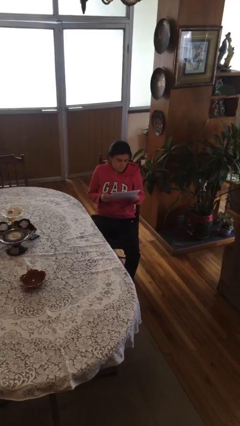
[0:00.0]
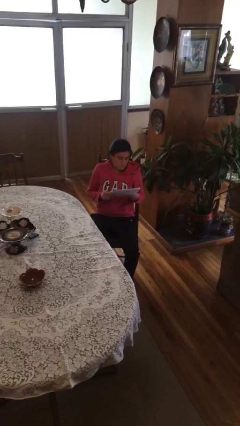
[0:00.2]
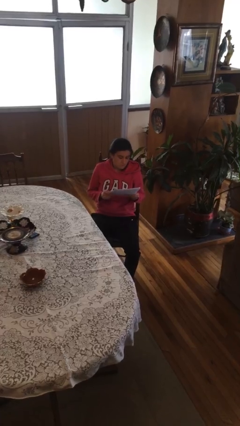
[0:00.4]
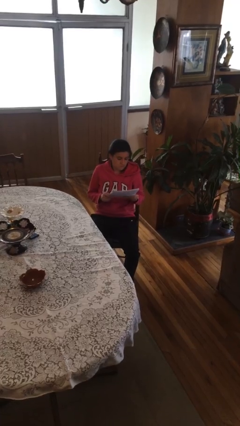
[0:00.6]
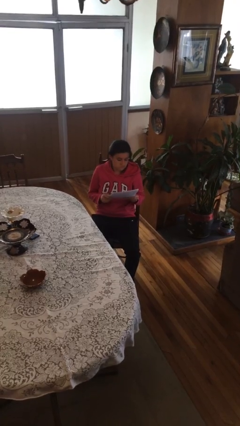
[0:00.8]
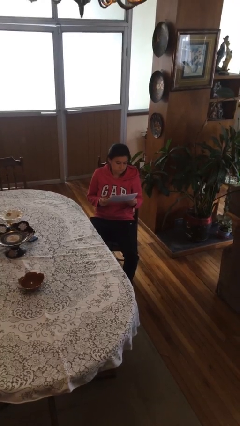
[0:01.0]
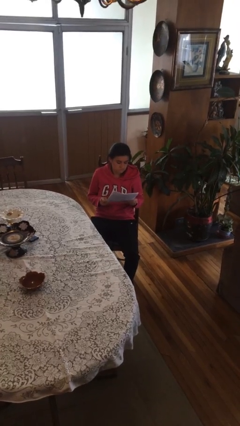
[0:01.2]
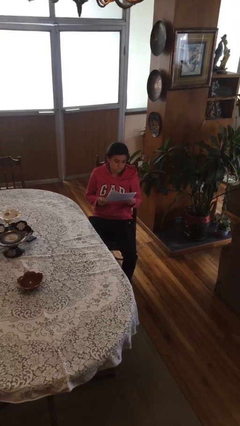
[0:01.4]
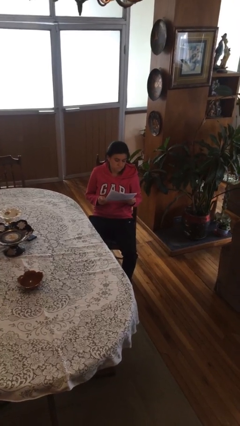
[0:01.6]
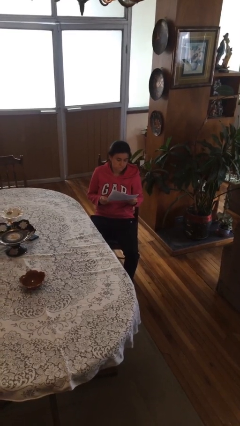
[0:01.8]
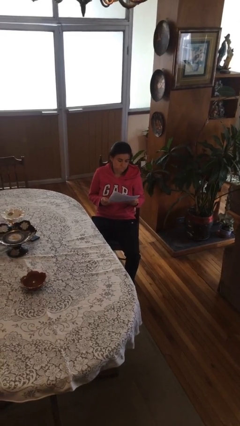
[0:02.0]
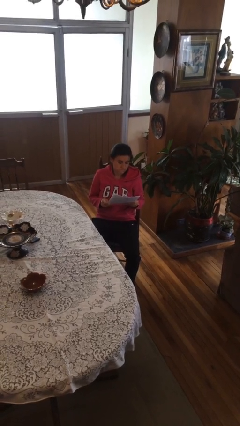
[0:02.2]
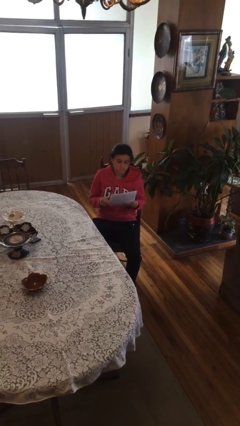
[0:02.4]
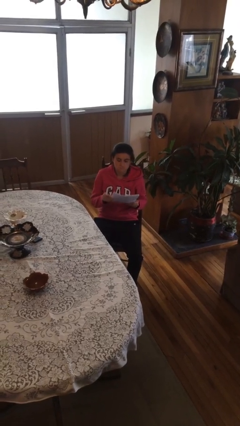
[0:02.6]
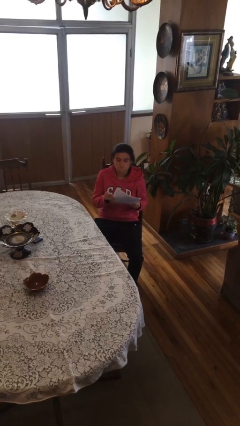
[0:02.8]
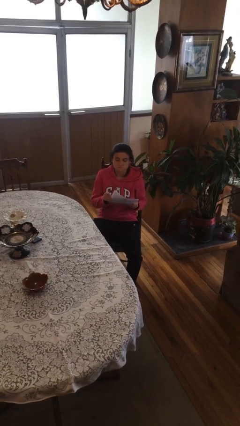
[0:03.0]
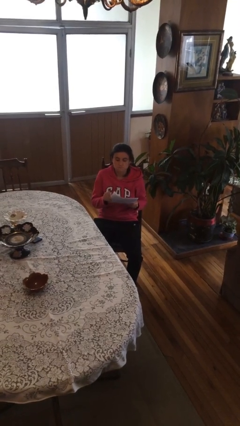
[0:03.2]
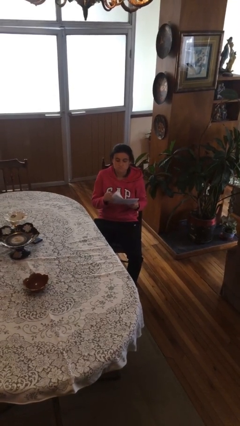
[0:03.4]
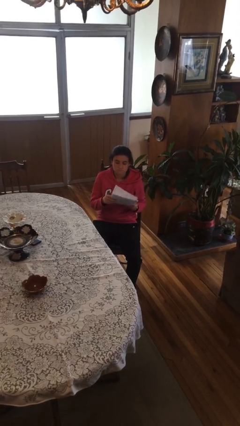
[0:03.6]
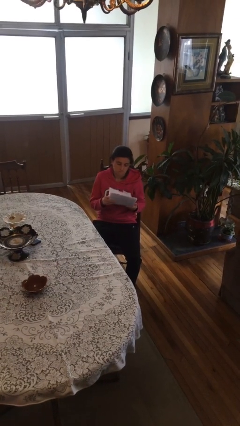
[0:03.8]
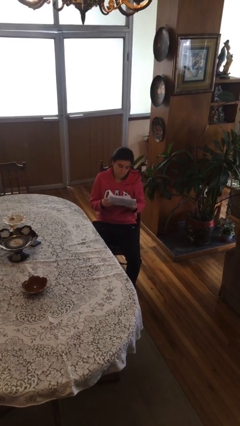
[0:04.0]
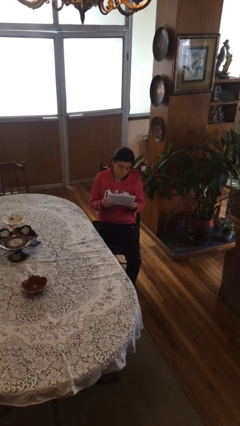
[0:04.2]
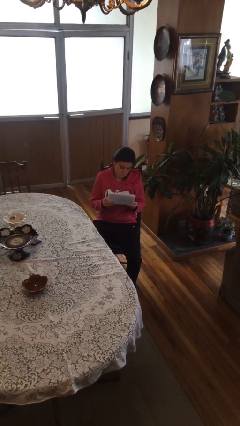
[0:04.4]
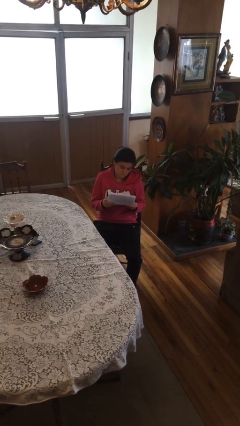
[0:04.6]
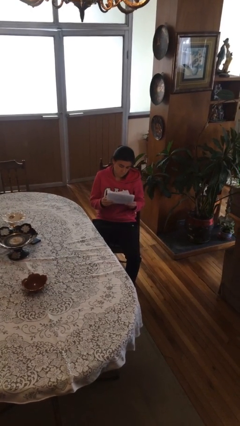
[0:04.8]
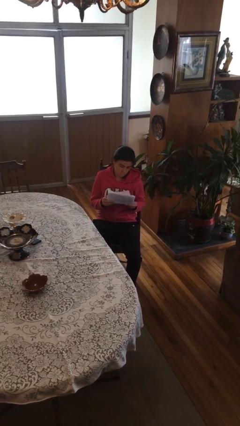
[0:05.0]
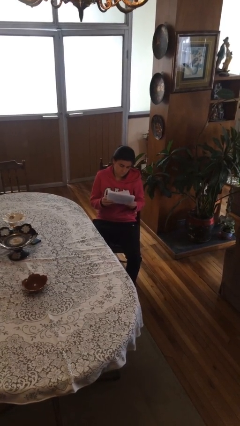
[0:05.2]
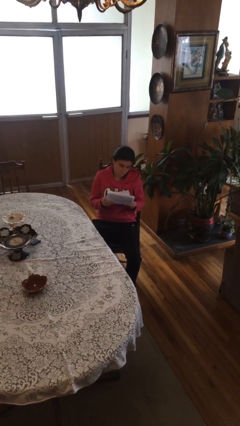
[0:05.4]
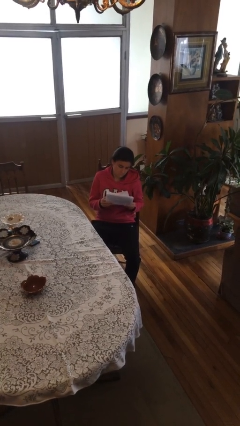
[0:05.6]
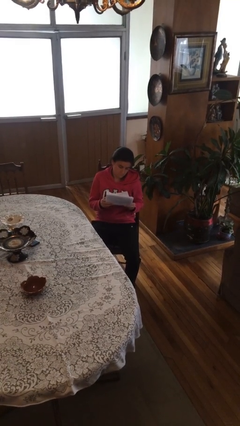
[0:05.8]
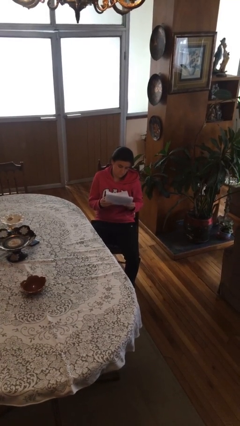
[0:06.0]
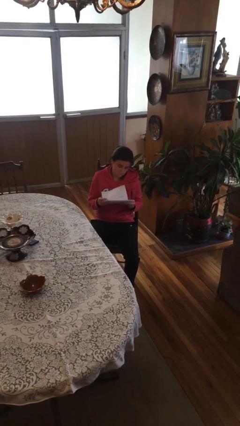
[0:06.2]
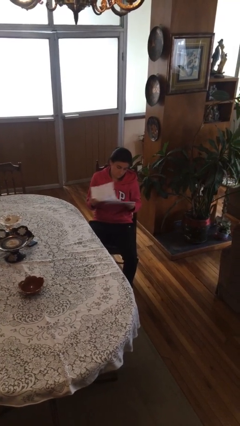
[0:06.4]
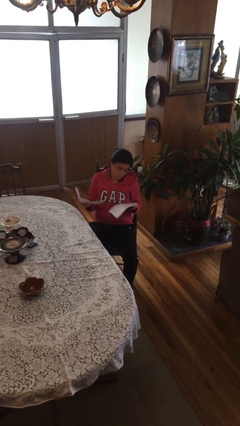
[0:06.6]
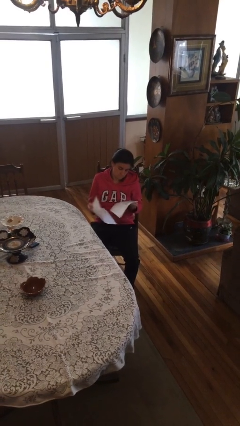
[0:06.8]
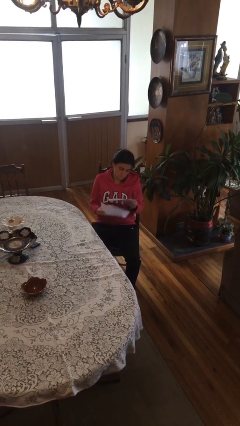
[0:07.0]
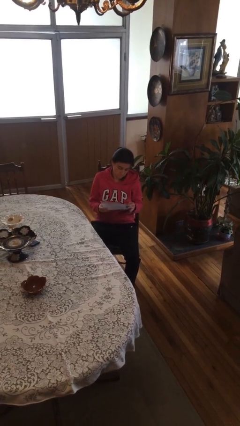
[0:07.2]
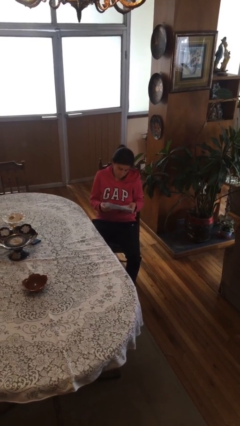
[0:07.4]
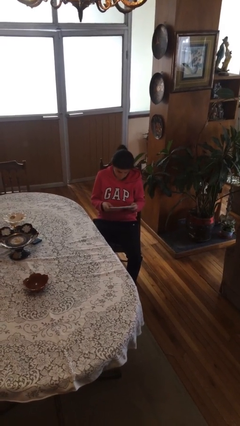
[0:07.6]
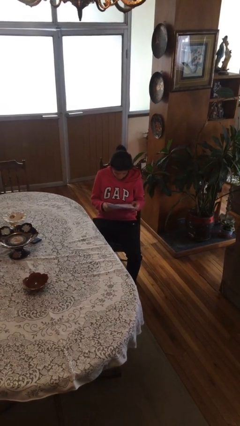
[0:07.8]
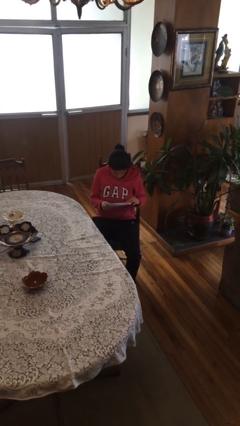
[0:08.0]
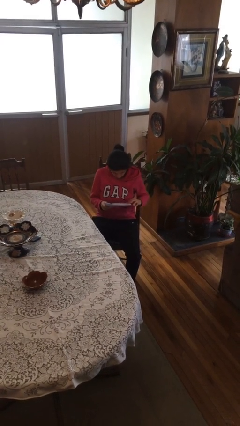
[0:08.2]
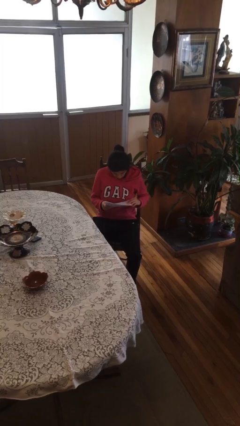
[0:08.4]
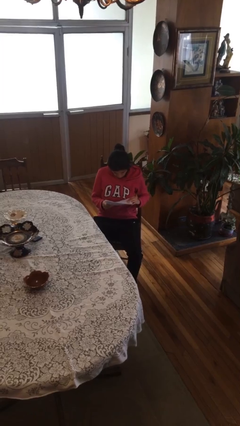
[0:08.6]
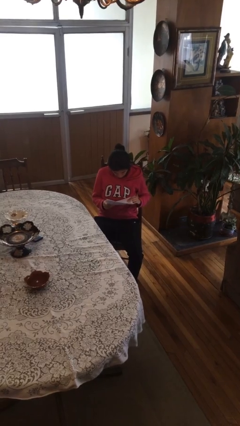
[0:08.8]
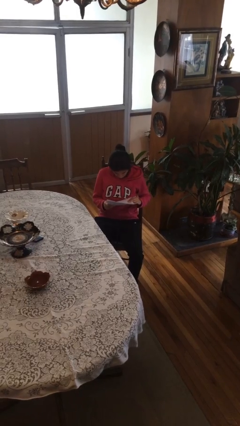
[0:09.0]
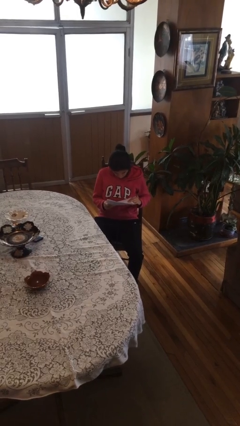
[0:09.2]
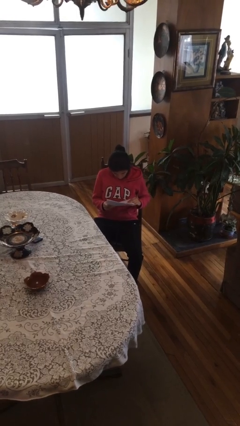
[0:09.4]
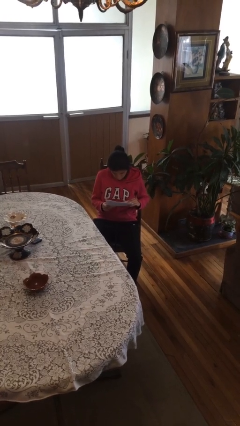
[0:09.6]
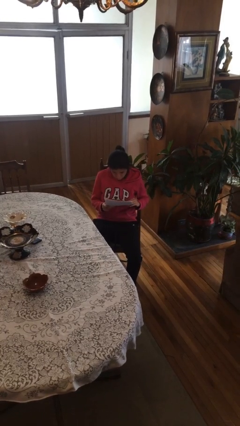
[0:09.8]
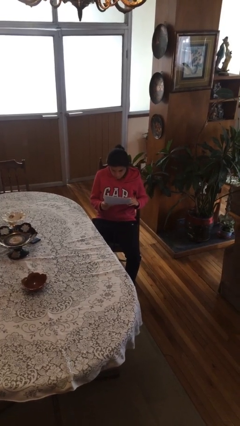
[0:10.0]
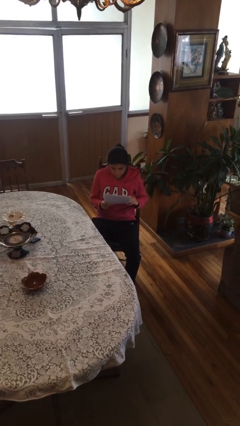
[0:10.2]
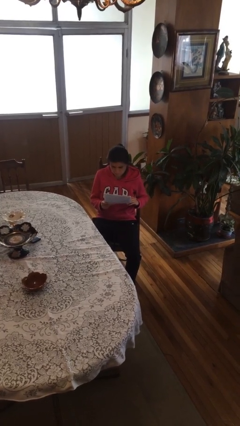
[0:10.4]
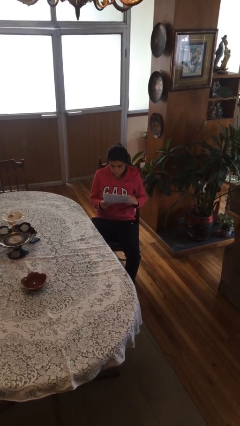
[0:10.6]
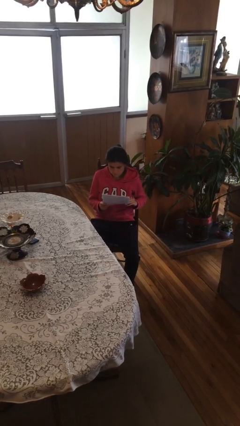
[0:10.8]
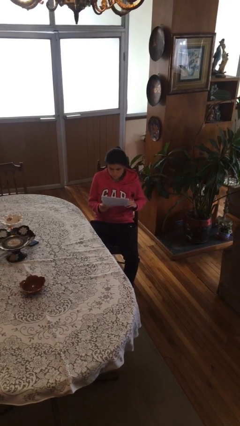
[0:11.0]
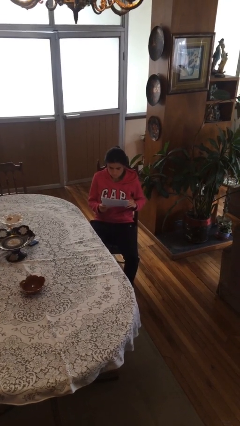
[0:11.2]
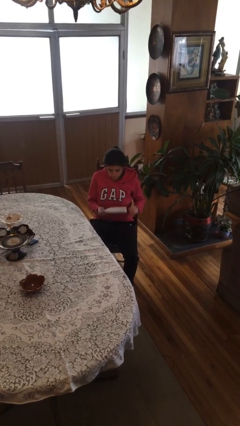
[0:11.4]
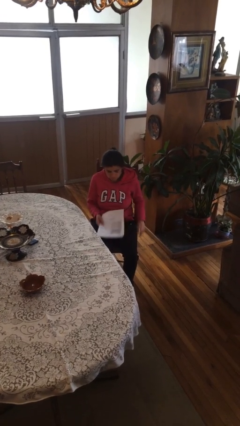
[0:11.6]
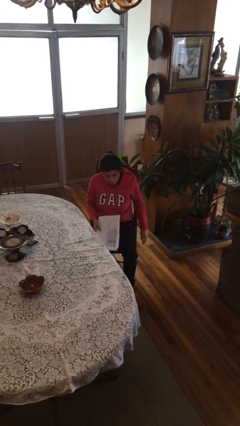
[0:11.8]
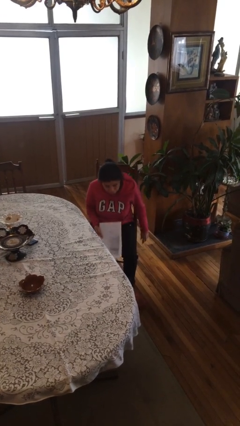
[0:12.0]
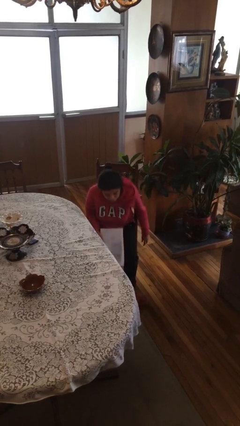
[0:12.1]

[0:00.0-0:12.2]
person reads document

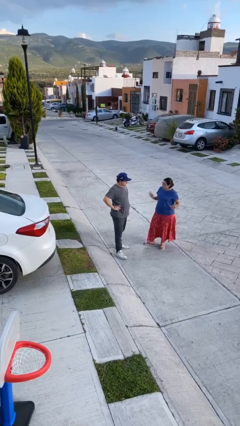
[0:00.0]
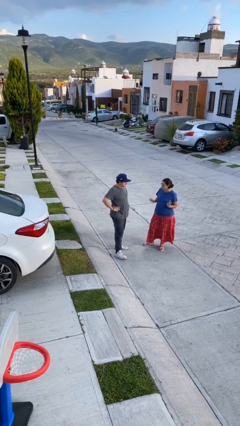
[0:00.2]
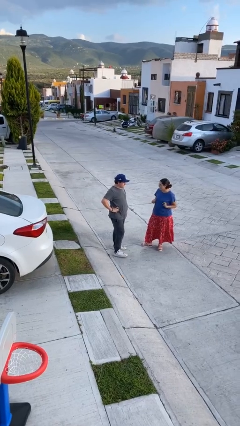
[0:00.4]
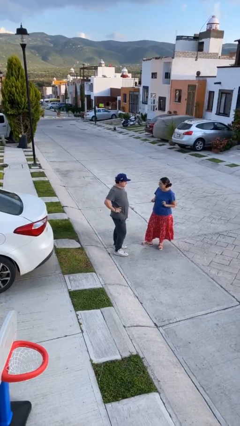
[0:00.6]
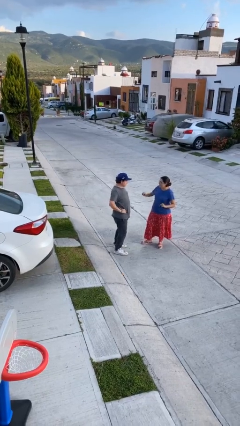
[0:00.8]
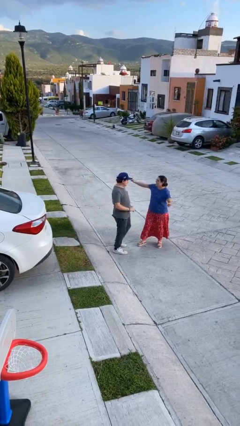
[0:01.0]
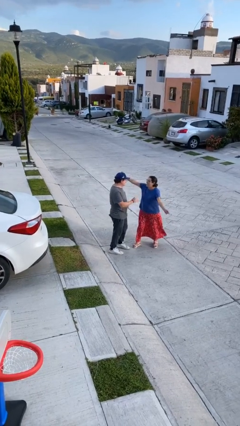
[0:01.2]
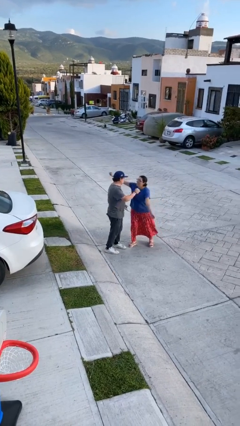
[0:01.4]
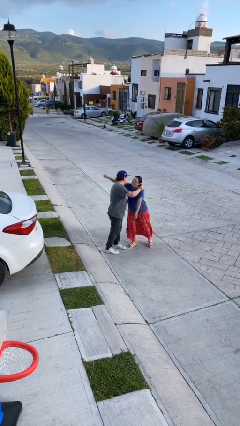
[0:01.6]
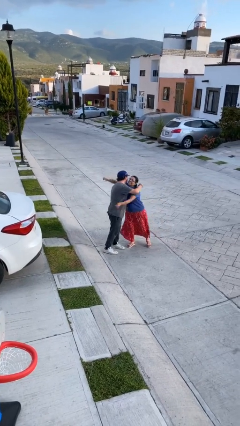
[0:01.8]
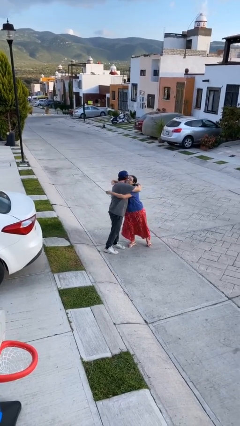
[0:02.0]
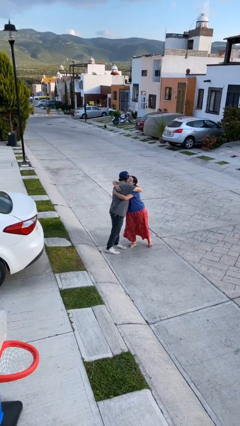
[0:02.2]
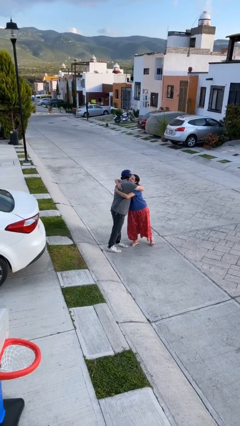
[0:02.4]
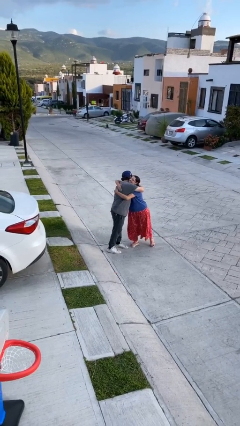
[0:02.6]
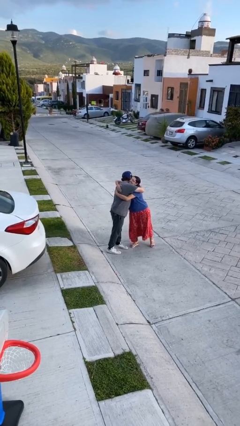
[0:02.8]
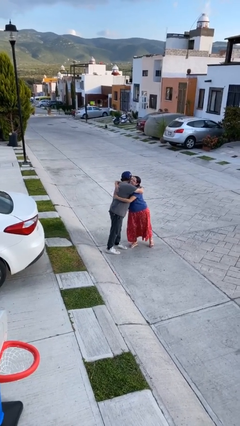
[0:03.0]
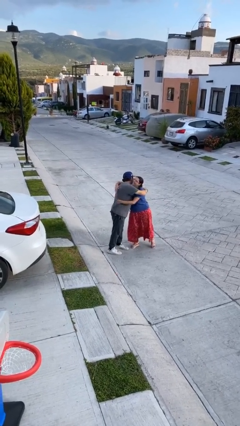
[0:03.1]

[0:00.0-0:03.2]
person embraces person

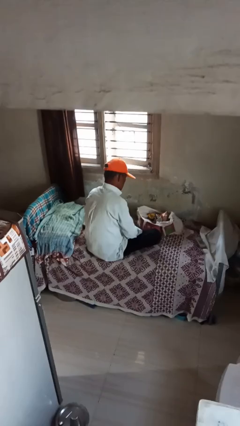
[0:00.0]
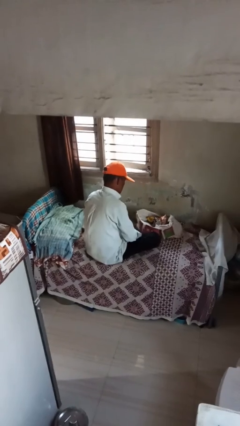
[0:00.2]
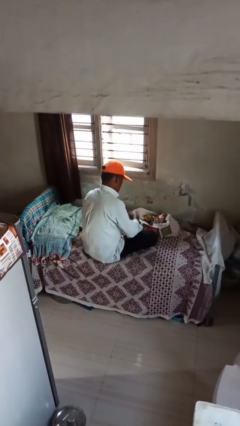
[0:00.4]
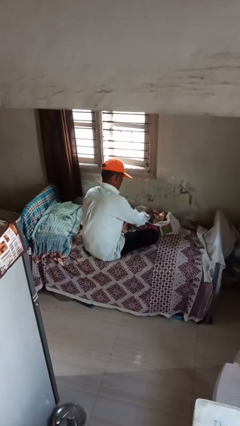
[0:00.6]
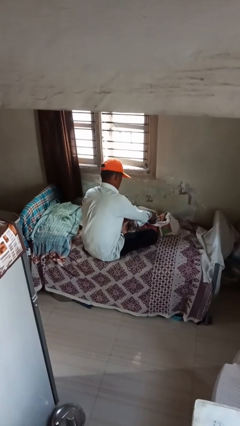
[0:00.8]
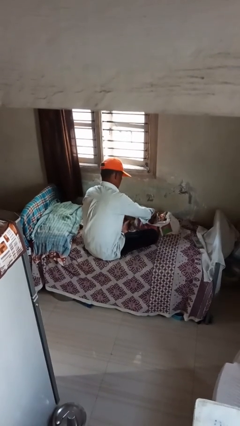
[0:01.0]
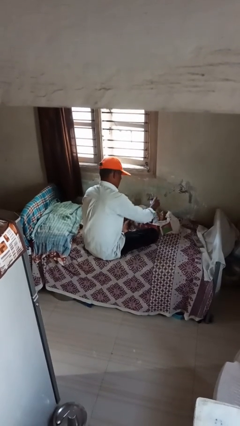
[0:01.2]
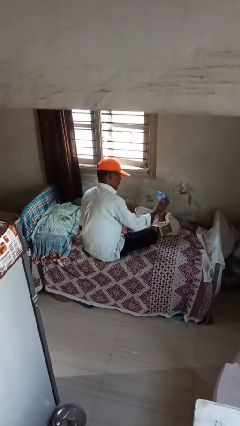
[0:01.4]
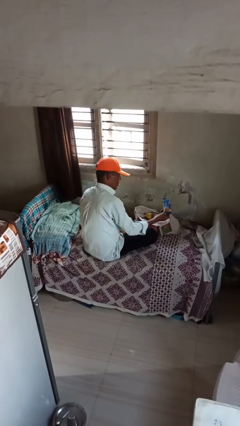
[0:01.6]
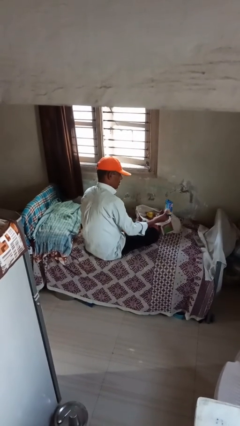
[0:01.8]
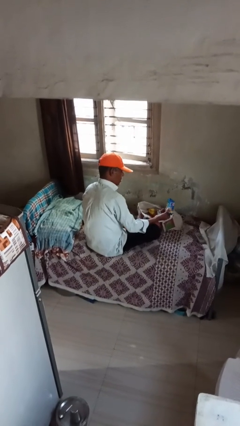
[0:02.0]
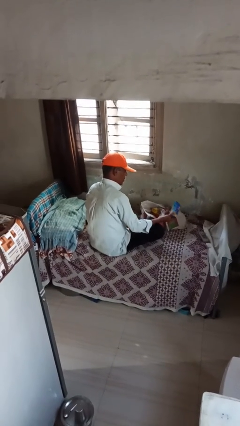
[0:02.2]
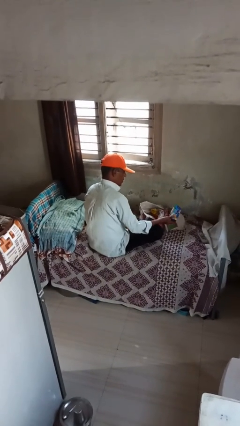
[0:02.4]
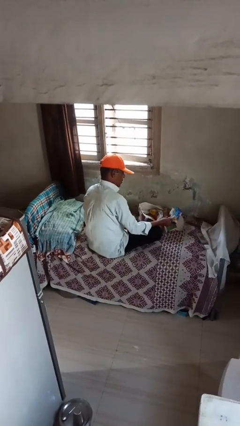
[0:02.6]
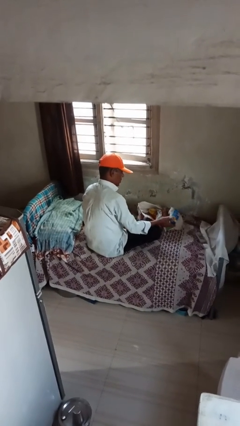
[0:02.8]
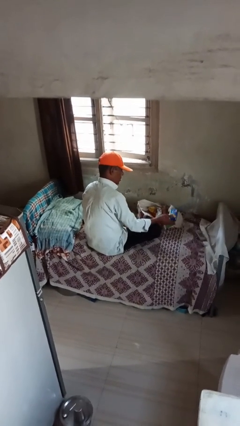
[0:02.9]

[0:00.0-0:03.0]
person takes object from bag
